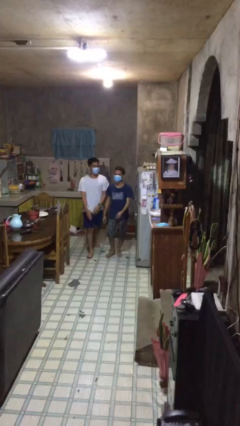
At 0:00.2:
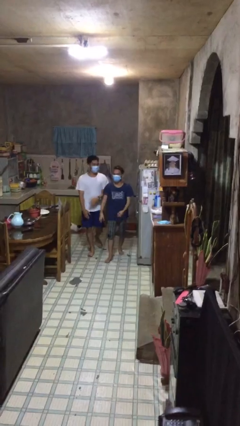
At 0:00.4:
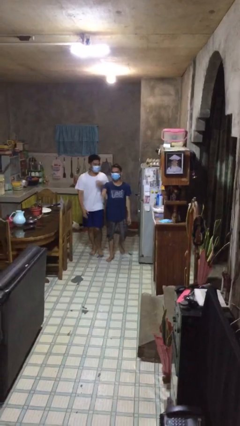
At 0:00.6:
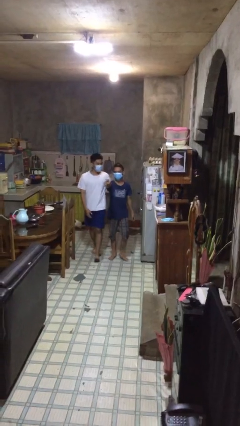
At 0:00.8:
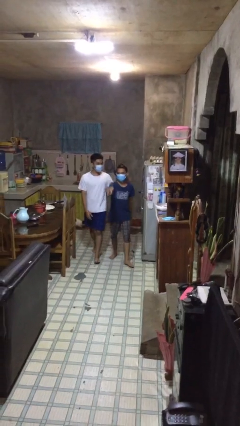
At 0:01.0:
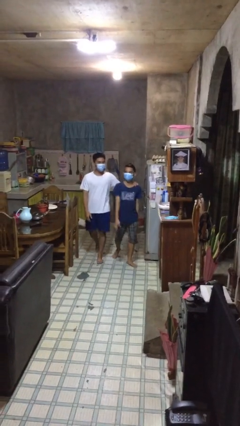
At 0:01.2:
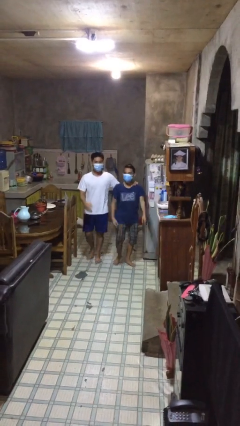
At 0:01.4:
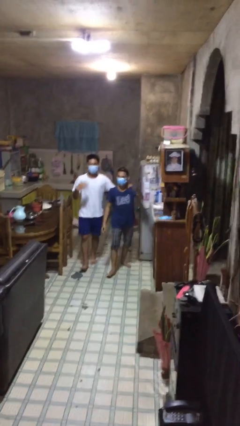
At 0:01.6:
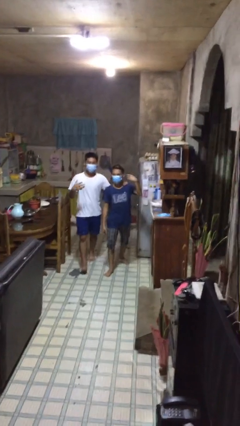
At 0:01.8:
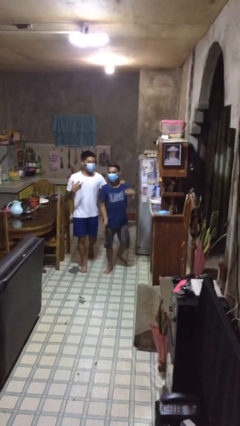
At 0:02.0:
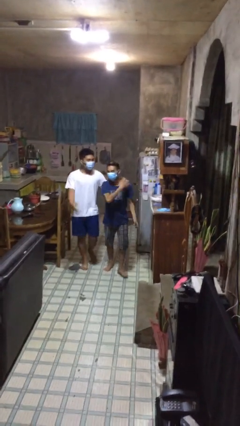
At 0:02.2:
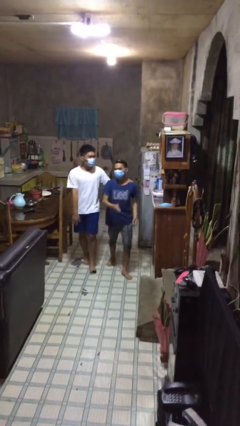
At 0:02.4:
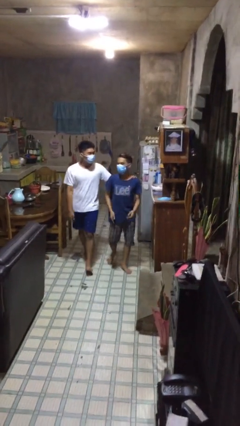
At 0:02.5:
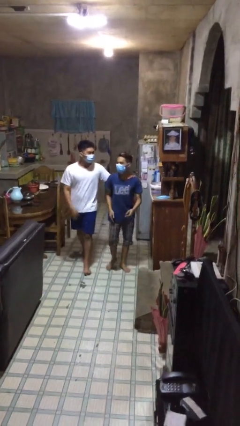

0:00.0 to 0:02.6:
person talks to person

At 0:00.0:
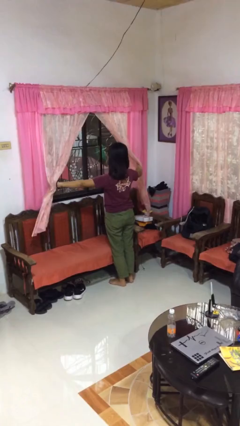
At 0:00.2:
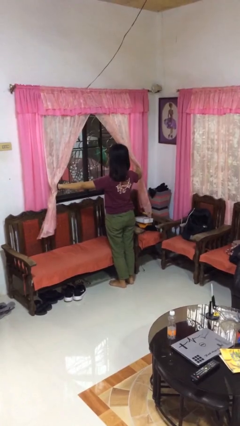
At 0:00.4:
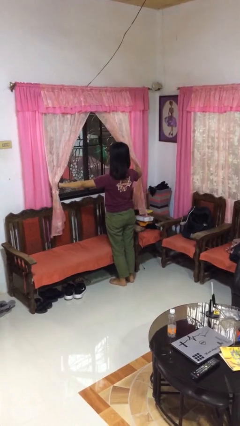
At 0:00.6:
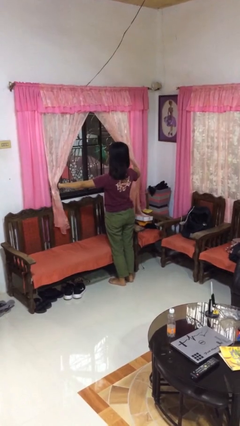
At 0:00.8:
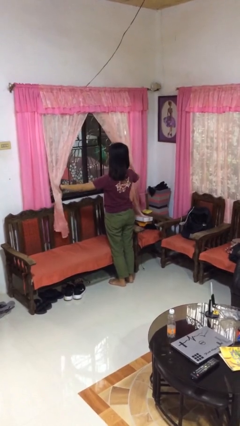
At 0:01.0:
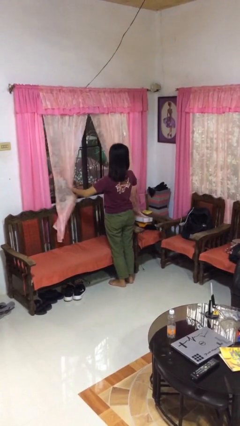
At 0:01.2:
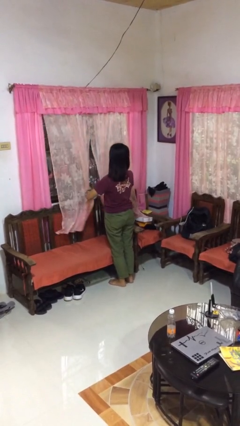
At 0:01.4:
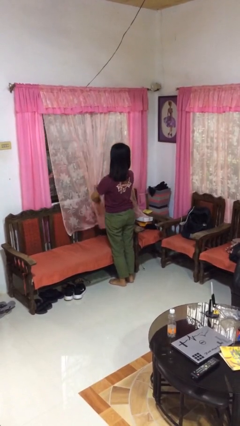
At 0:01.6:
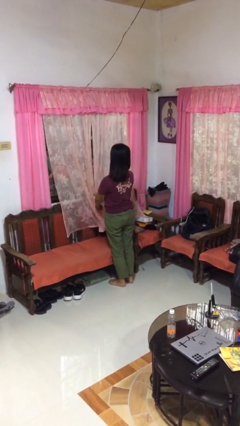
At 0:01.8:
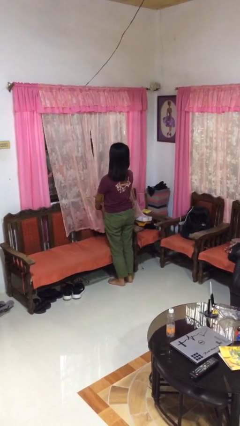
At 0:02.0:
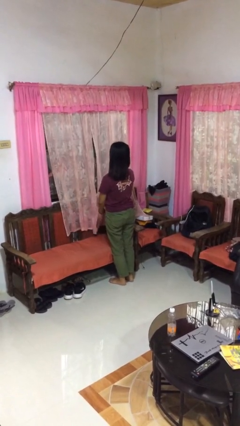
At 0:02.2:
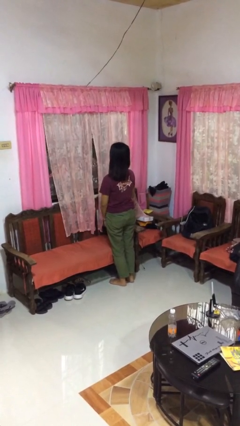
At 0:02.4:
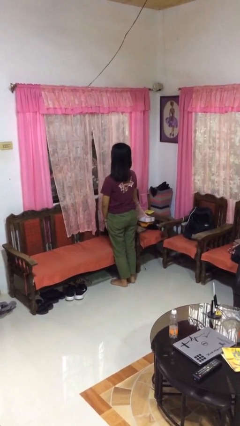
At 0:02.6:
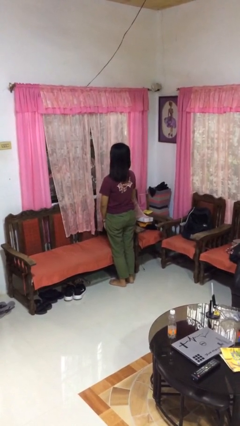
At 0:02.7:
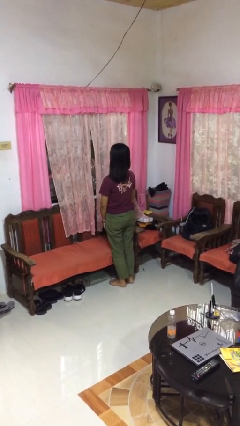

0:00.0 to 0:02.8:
person closes curtains

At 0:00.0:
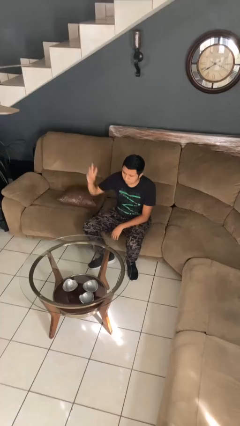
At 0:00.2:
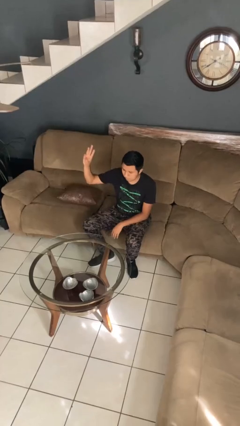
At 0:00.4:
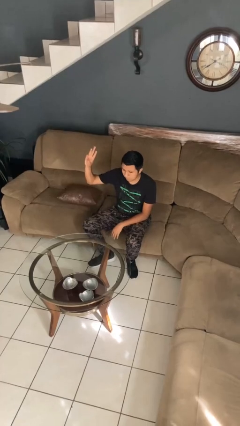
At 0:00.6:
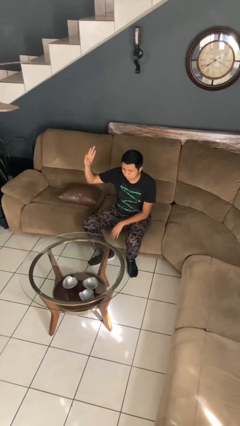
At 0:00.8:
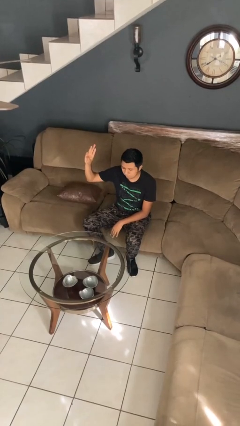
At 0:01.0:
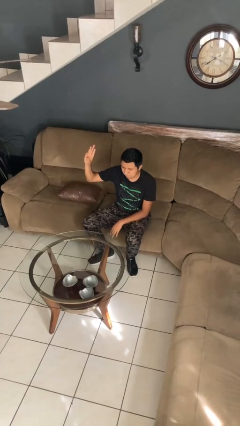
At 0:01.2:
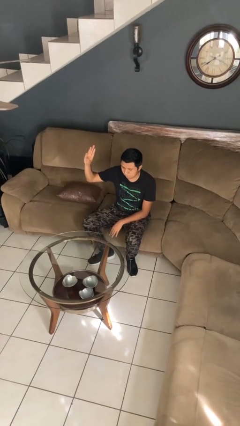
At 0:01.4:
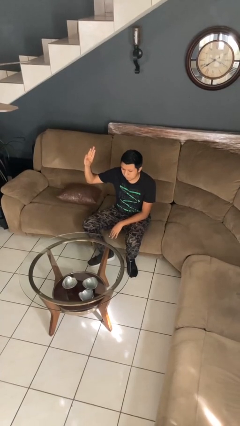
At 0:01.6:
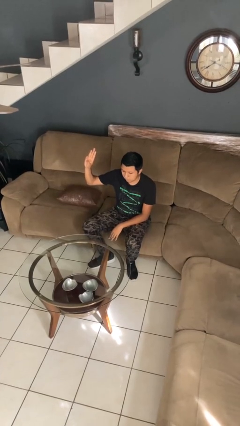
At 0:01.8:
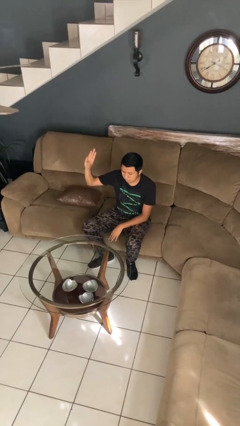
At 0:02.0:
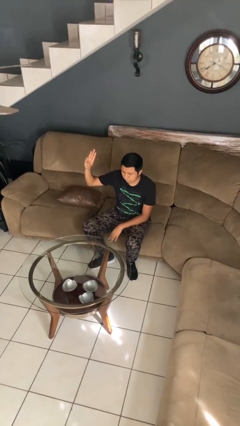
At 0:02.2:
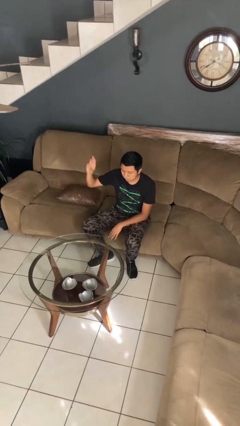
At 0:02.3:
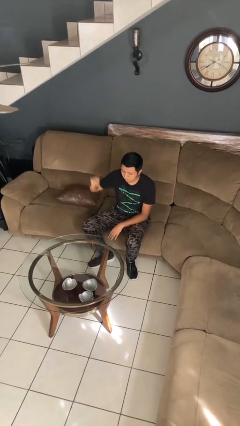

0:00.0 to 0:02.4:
person gestures number three

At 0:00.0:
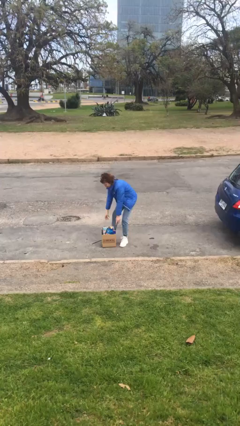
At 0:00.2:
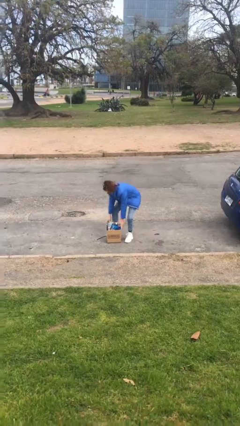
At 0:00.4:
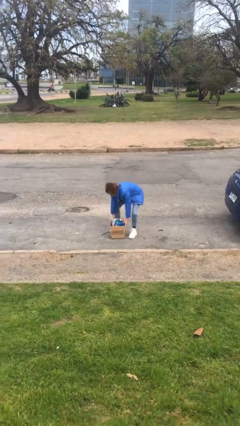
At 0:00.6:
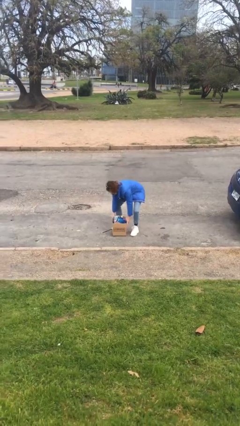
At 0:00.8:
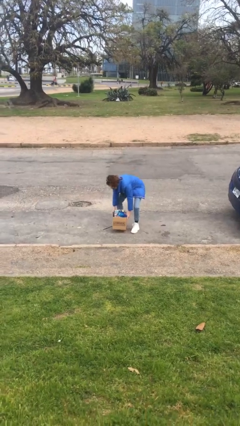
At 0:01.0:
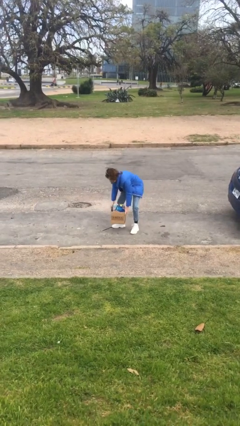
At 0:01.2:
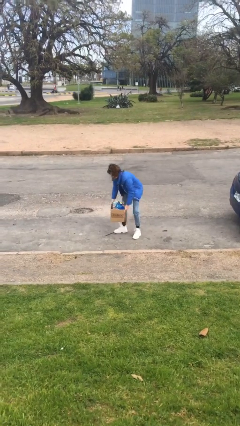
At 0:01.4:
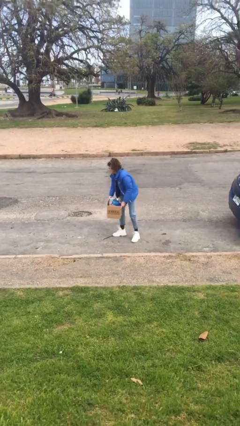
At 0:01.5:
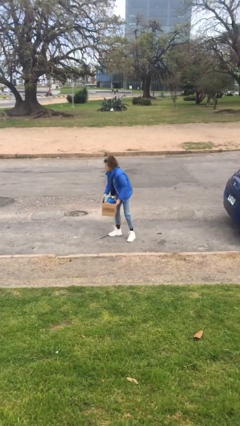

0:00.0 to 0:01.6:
person picks up object from floor

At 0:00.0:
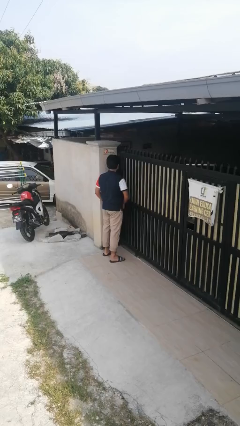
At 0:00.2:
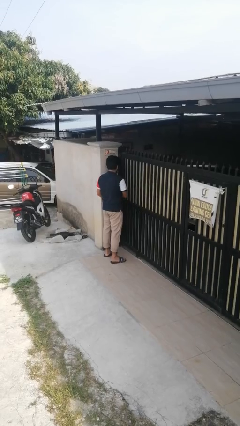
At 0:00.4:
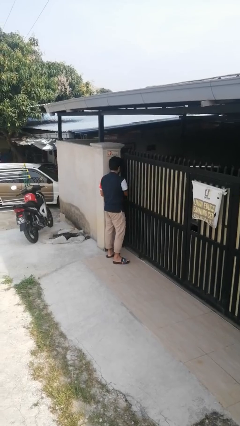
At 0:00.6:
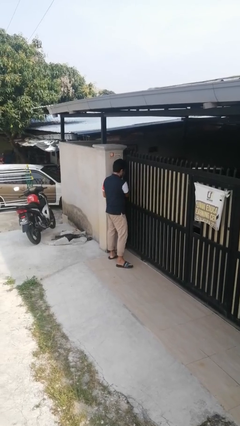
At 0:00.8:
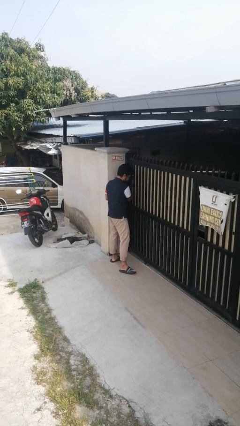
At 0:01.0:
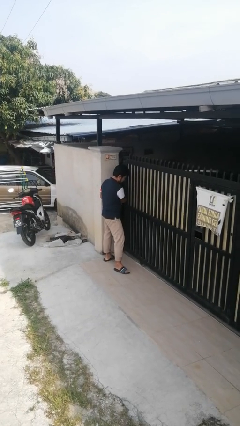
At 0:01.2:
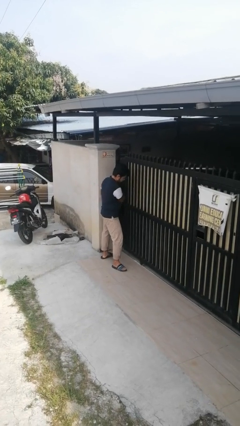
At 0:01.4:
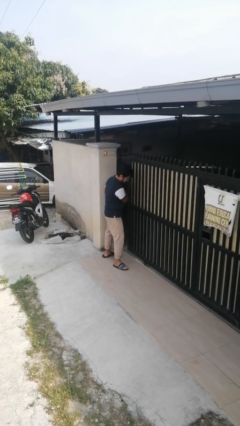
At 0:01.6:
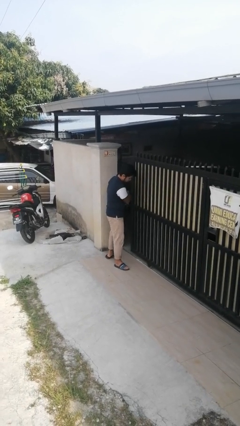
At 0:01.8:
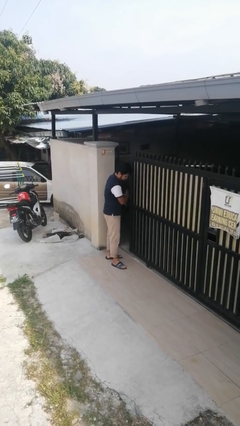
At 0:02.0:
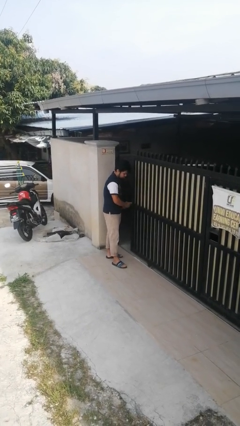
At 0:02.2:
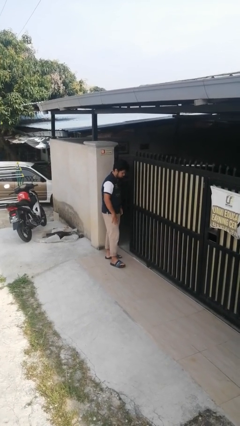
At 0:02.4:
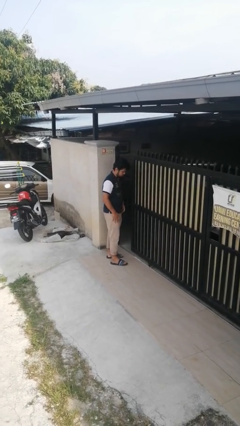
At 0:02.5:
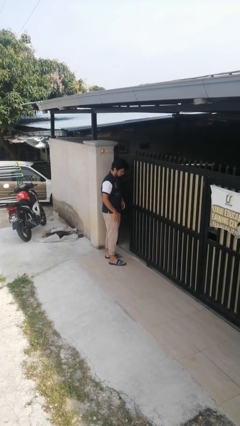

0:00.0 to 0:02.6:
person opens sliding door

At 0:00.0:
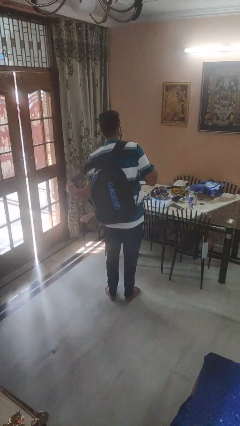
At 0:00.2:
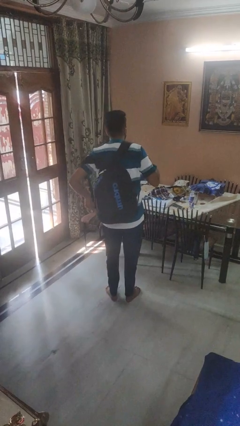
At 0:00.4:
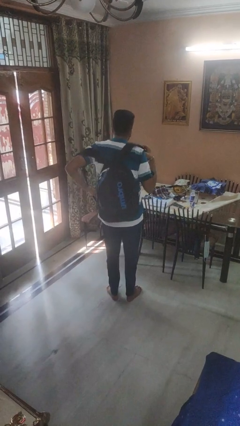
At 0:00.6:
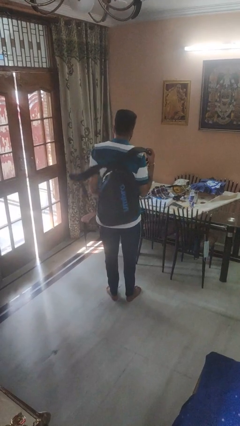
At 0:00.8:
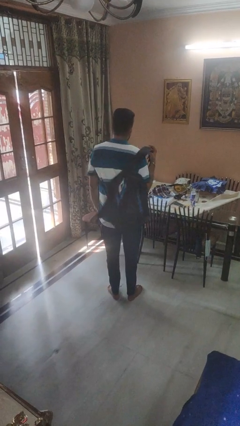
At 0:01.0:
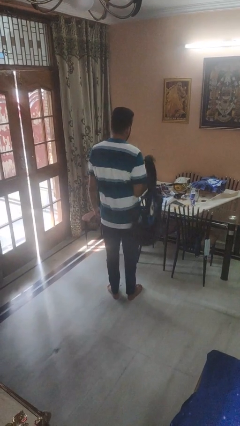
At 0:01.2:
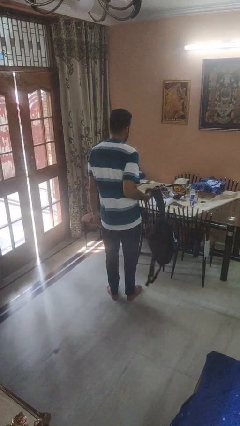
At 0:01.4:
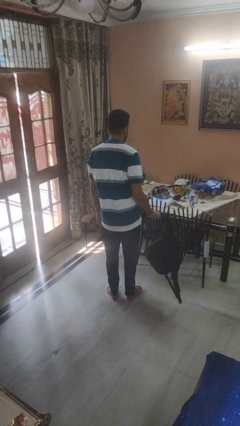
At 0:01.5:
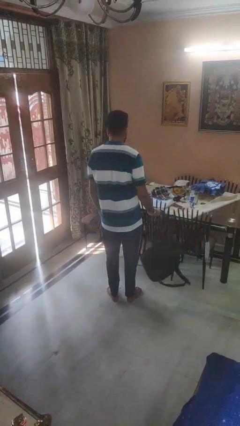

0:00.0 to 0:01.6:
person takes off backpack

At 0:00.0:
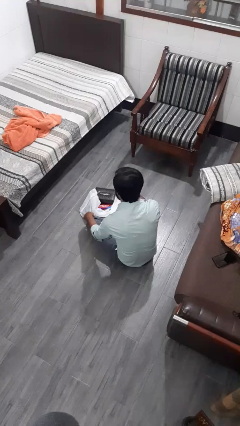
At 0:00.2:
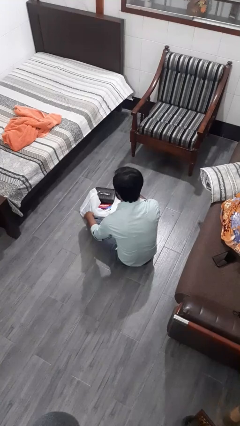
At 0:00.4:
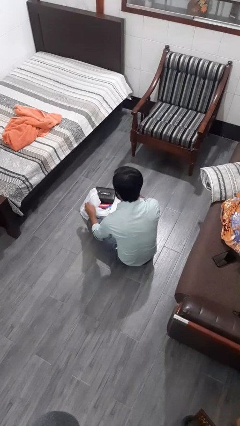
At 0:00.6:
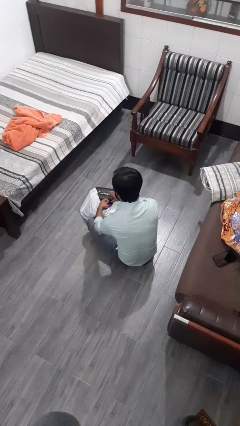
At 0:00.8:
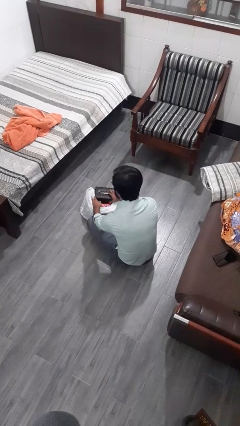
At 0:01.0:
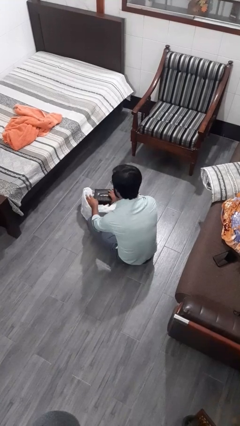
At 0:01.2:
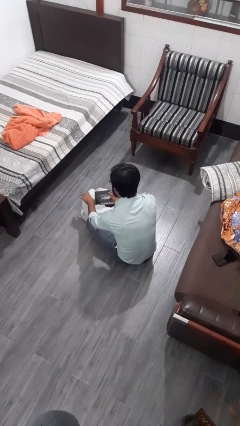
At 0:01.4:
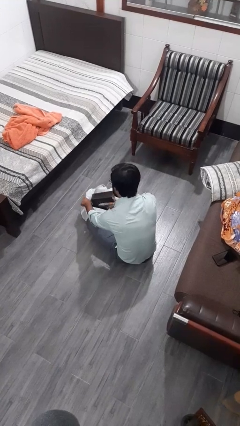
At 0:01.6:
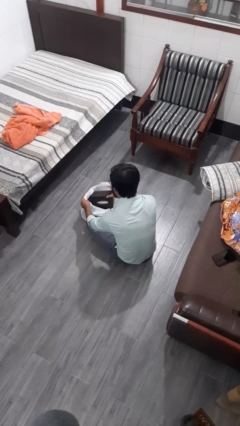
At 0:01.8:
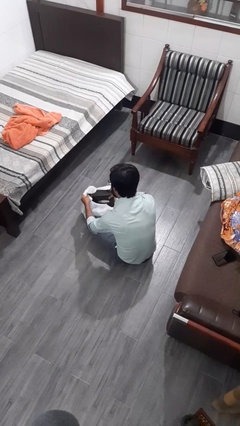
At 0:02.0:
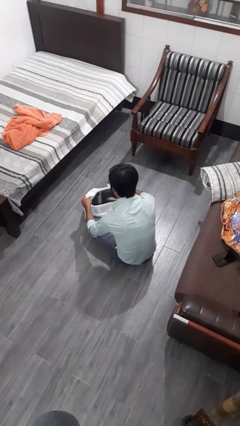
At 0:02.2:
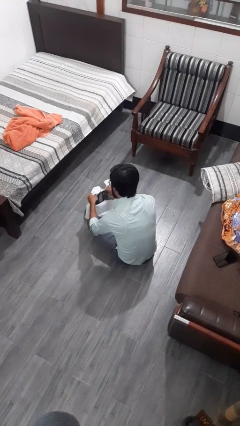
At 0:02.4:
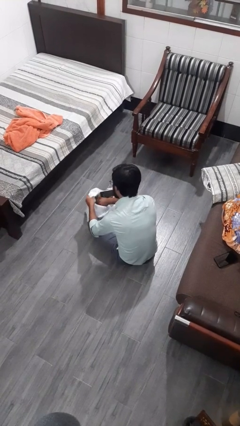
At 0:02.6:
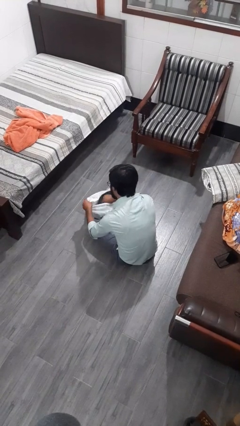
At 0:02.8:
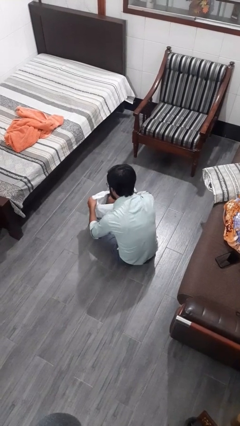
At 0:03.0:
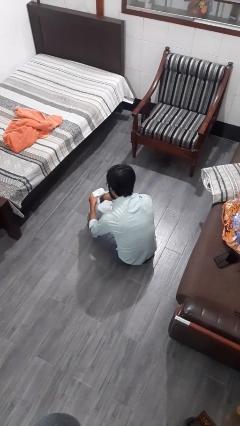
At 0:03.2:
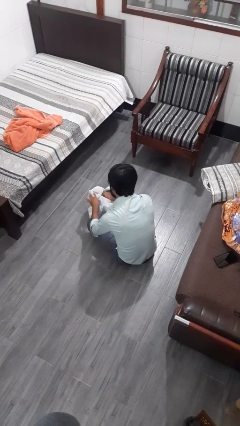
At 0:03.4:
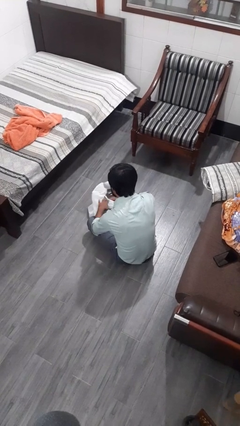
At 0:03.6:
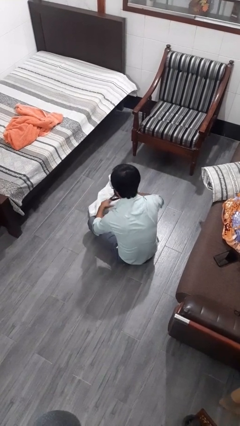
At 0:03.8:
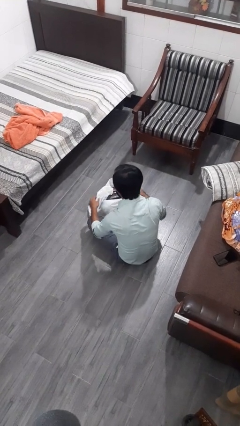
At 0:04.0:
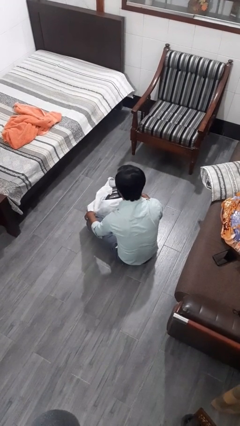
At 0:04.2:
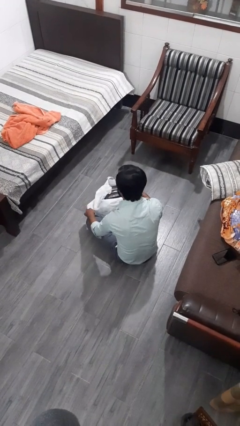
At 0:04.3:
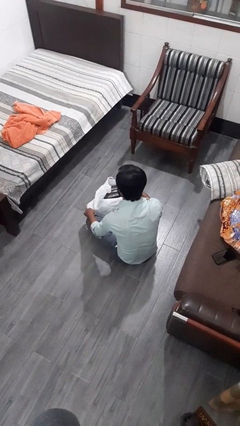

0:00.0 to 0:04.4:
person searches in bag
